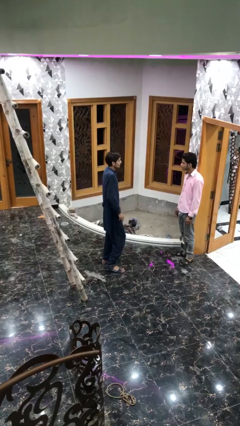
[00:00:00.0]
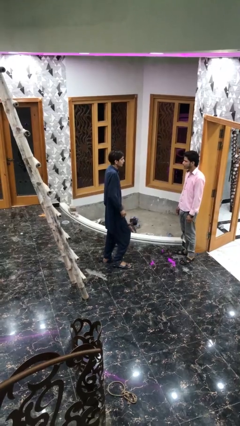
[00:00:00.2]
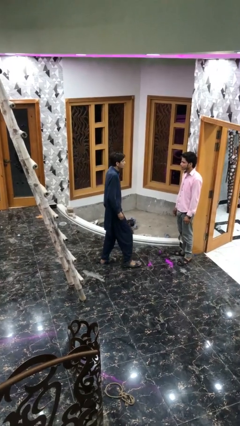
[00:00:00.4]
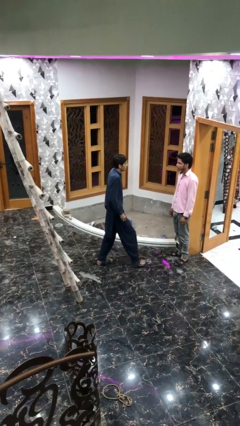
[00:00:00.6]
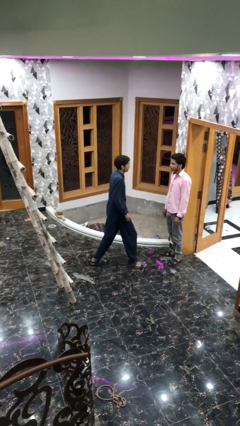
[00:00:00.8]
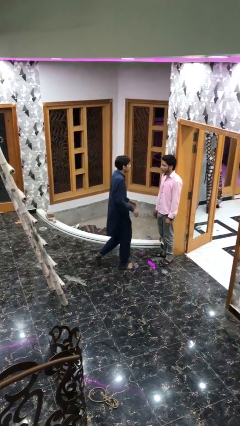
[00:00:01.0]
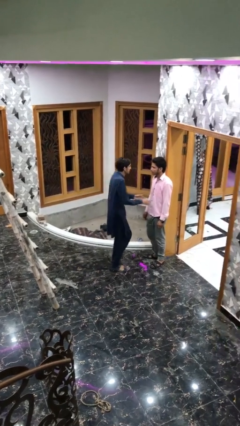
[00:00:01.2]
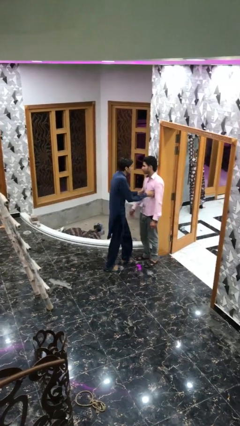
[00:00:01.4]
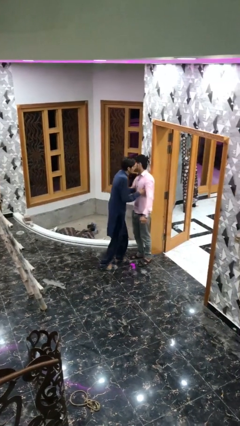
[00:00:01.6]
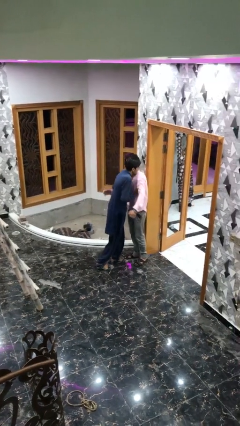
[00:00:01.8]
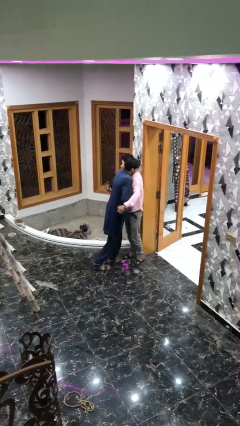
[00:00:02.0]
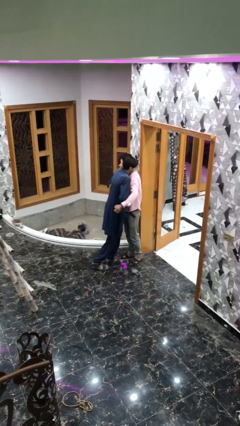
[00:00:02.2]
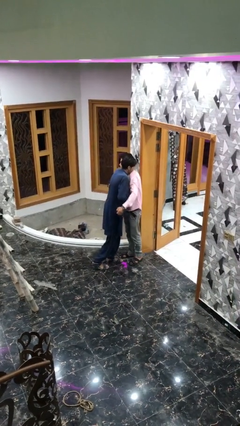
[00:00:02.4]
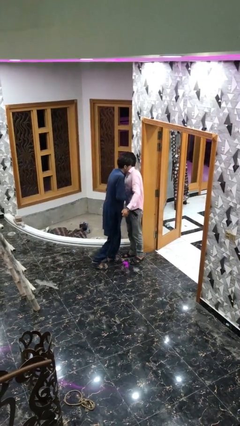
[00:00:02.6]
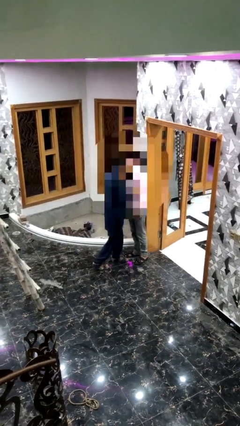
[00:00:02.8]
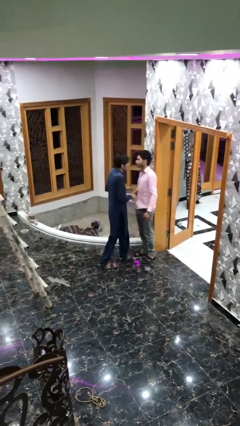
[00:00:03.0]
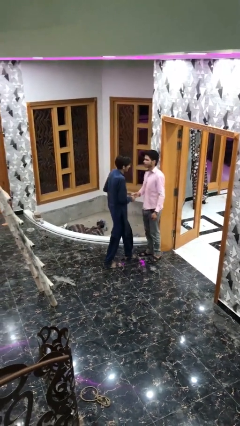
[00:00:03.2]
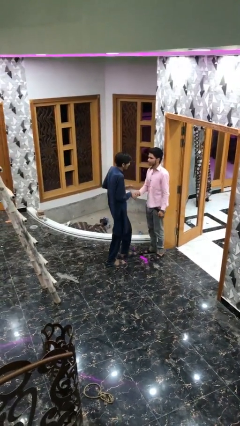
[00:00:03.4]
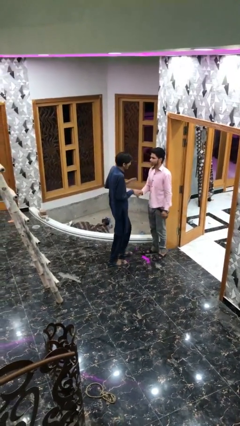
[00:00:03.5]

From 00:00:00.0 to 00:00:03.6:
person embraces person

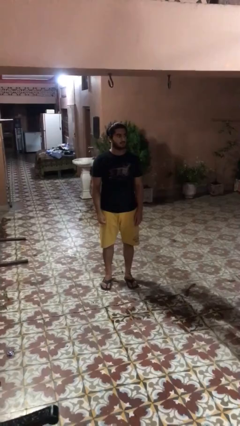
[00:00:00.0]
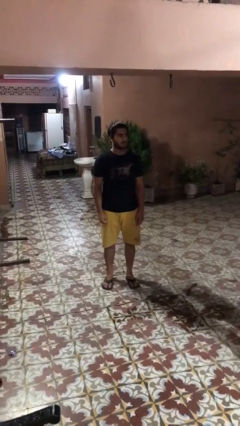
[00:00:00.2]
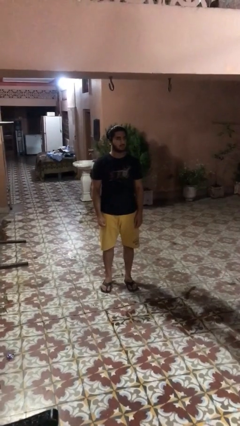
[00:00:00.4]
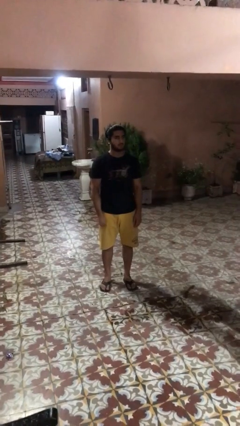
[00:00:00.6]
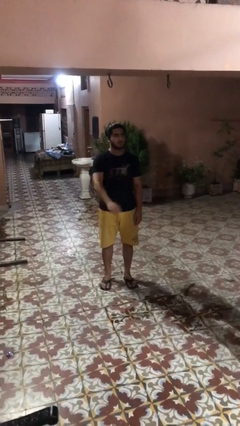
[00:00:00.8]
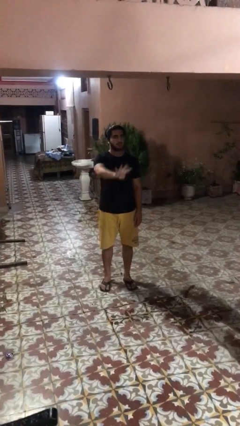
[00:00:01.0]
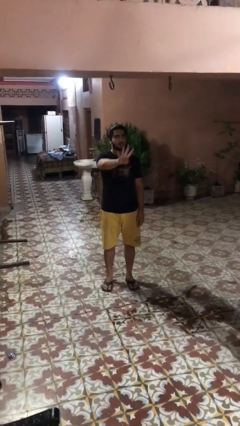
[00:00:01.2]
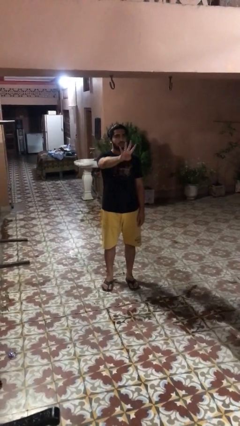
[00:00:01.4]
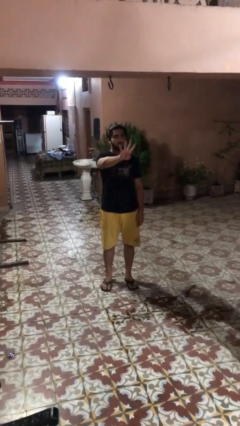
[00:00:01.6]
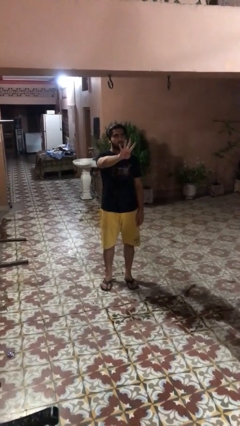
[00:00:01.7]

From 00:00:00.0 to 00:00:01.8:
person gestures number four

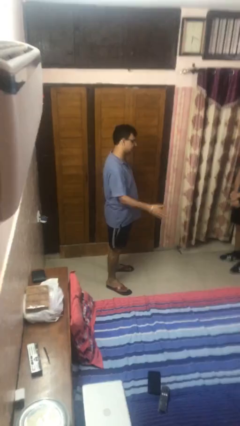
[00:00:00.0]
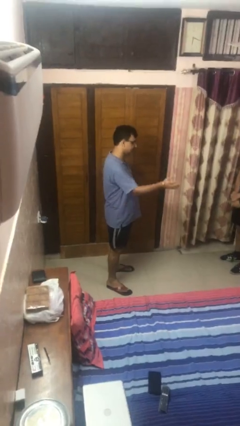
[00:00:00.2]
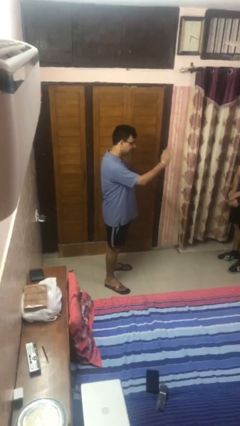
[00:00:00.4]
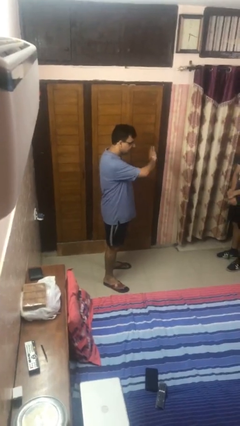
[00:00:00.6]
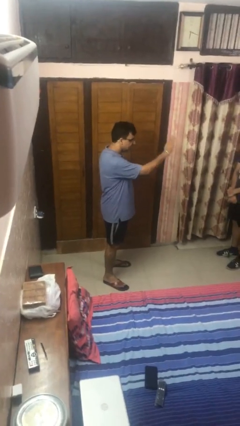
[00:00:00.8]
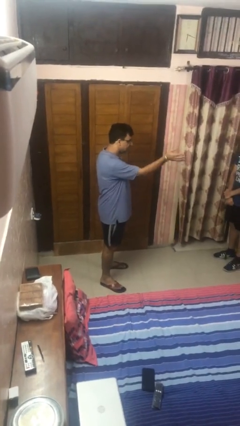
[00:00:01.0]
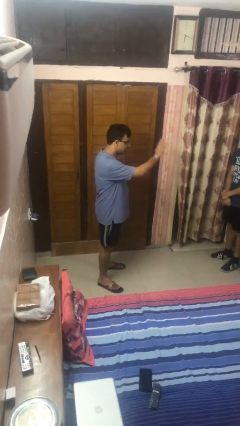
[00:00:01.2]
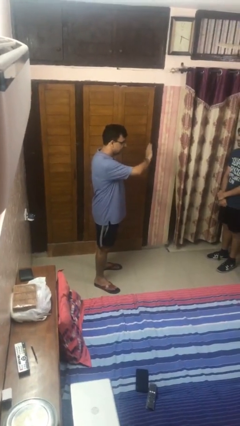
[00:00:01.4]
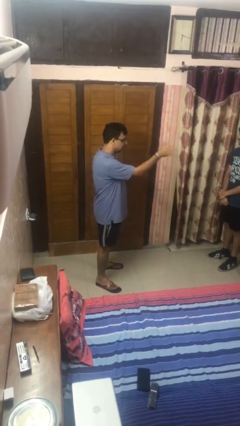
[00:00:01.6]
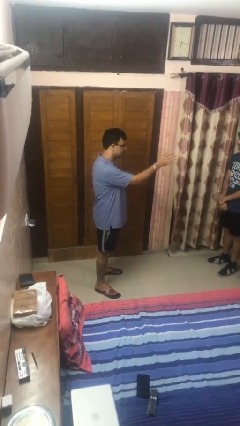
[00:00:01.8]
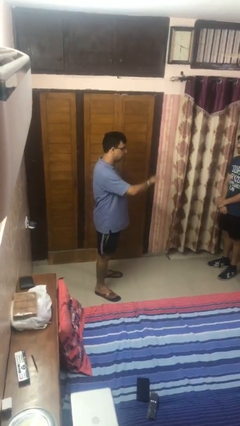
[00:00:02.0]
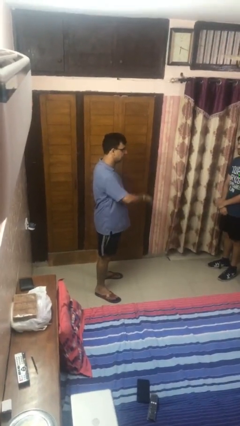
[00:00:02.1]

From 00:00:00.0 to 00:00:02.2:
person waves at person

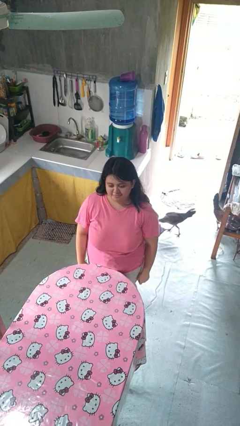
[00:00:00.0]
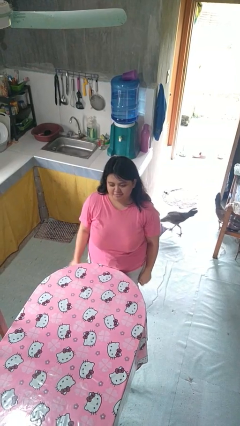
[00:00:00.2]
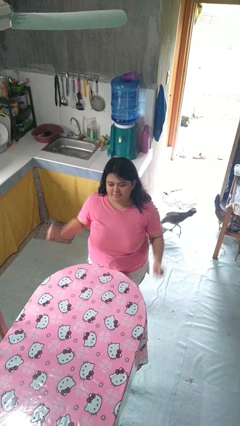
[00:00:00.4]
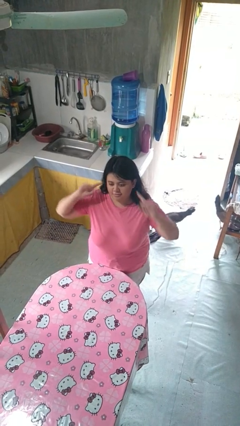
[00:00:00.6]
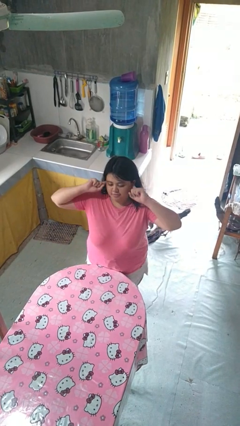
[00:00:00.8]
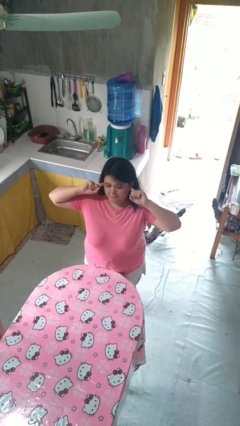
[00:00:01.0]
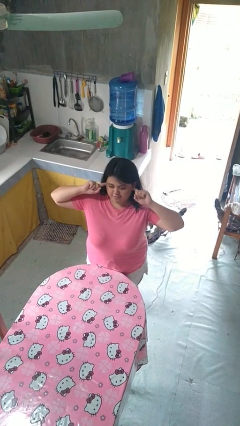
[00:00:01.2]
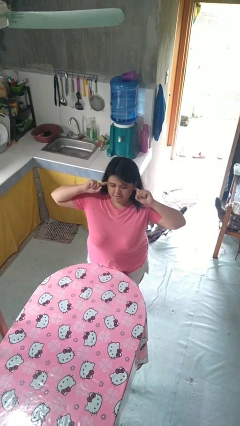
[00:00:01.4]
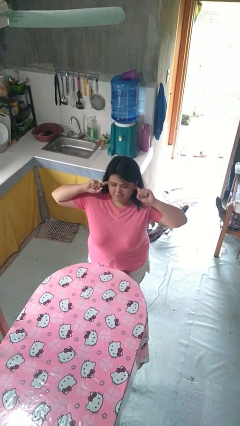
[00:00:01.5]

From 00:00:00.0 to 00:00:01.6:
person puts fingers in ear

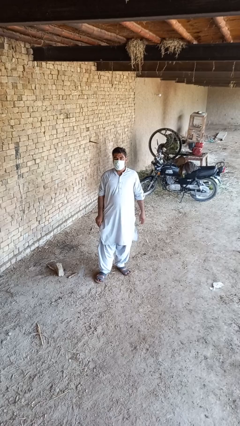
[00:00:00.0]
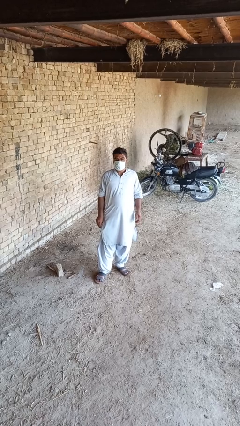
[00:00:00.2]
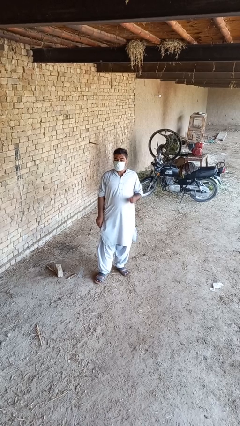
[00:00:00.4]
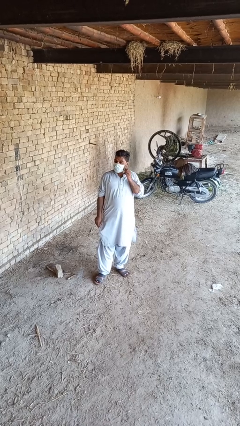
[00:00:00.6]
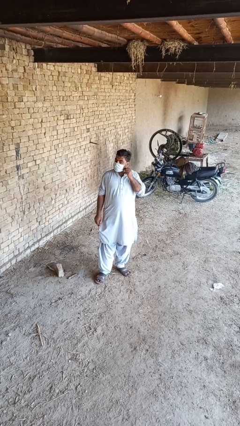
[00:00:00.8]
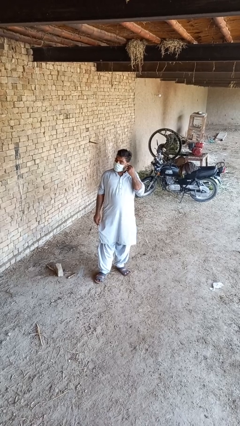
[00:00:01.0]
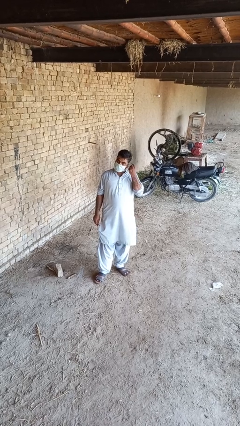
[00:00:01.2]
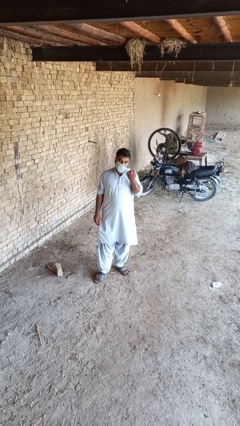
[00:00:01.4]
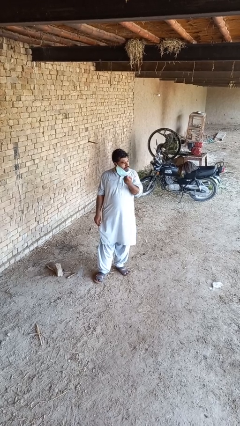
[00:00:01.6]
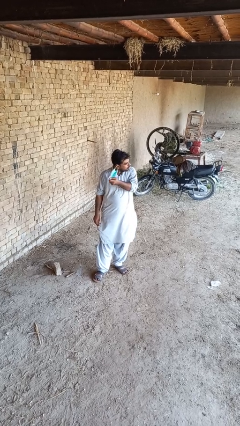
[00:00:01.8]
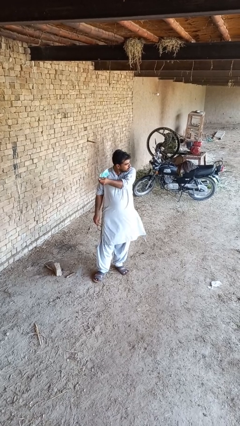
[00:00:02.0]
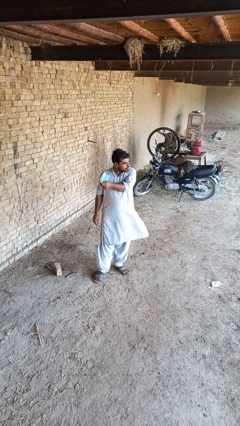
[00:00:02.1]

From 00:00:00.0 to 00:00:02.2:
person takes off facemask

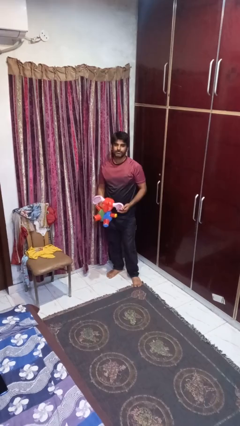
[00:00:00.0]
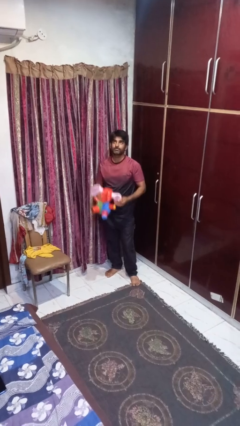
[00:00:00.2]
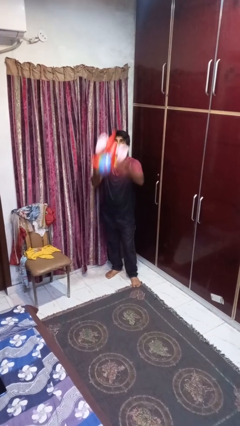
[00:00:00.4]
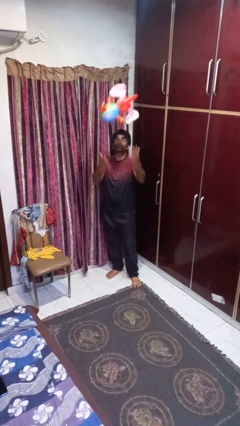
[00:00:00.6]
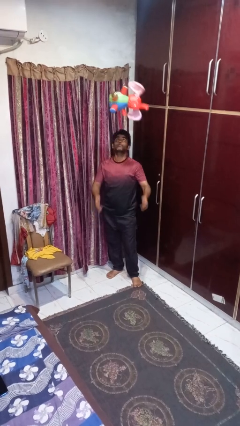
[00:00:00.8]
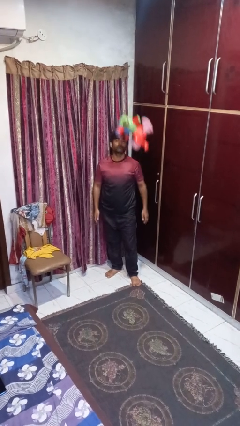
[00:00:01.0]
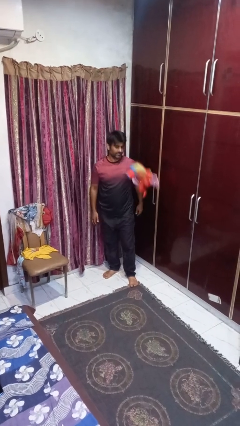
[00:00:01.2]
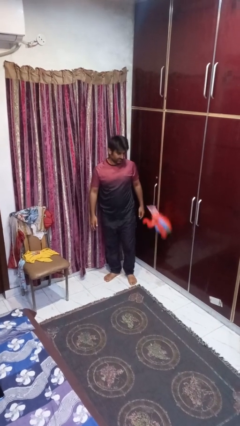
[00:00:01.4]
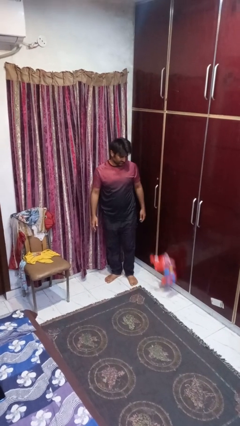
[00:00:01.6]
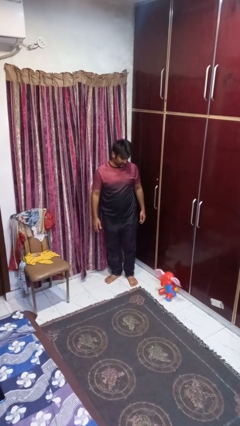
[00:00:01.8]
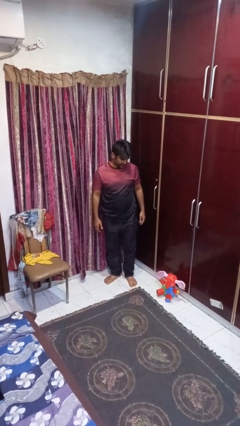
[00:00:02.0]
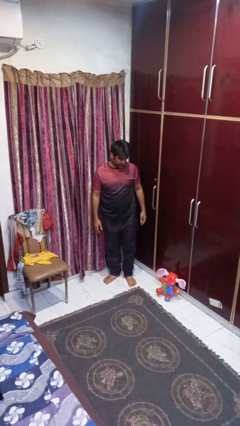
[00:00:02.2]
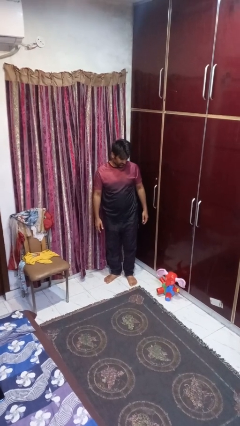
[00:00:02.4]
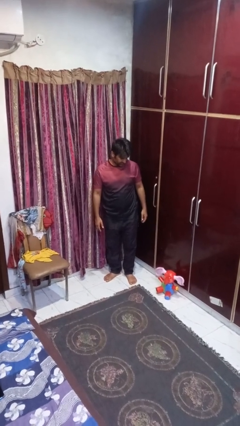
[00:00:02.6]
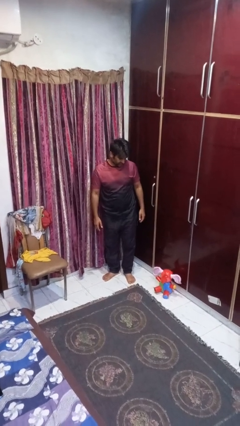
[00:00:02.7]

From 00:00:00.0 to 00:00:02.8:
person throws object into air

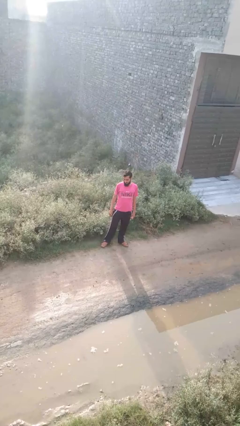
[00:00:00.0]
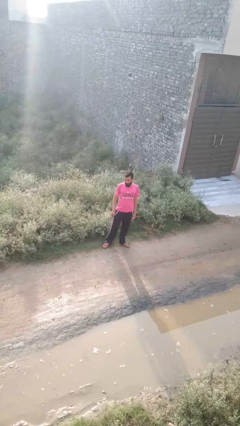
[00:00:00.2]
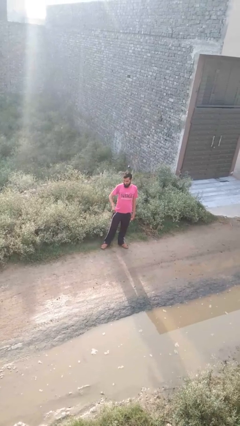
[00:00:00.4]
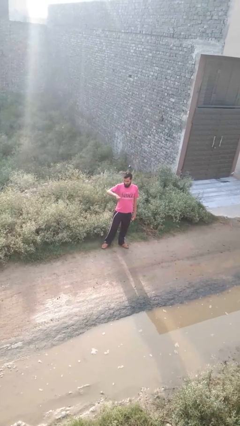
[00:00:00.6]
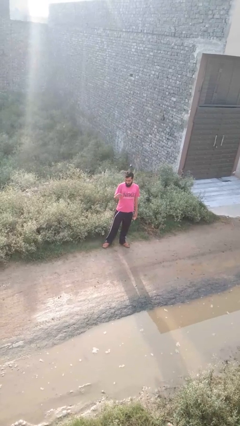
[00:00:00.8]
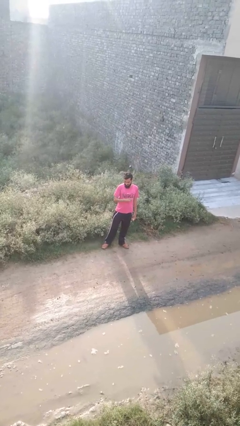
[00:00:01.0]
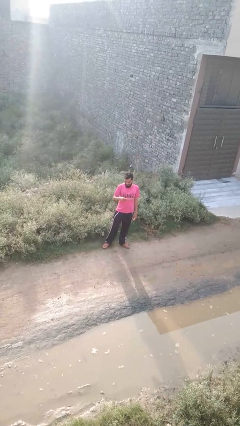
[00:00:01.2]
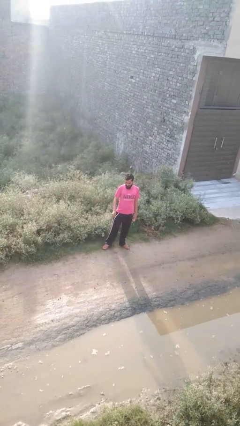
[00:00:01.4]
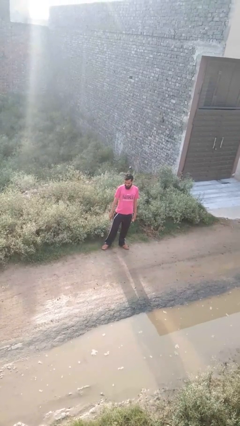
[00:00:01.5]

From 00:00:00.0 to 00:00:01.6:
person snaps fingers

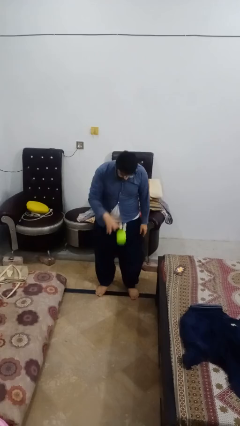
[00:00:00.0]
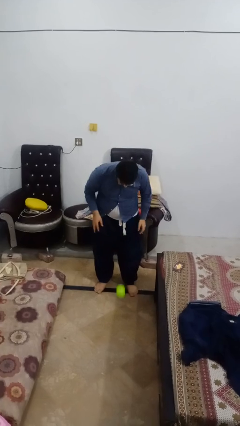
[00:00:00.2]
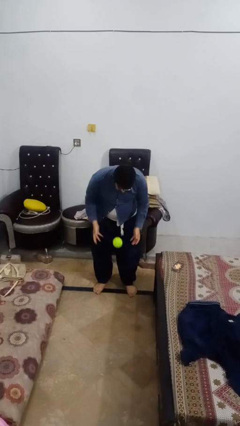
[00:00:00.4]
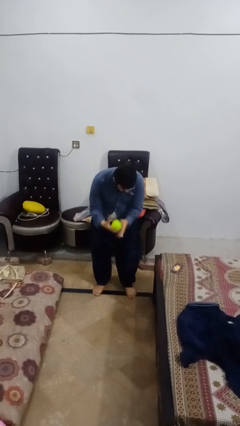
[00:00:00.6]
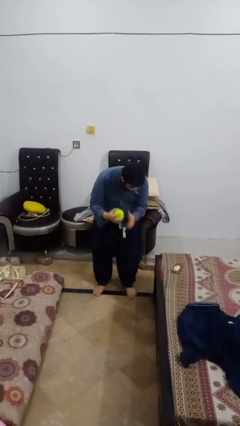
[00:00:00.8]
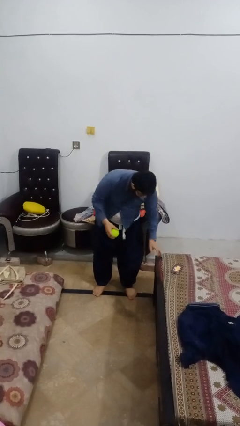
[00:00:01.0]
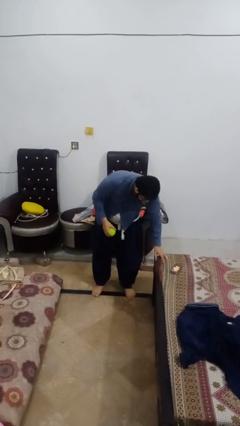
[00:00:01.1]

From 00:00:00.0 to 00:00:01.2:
person bounces ball on floor
